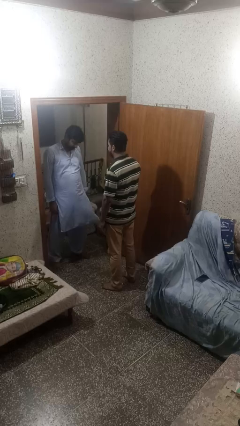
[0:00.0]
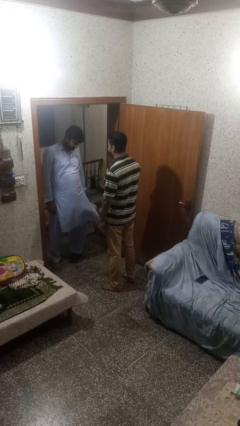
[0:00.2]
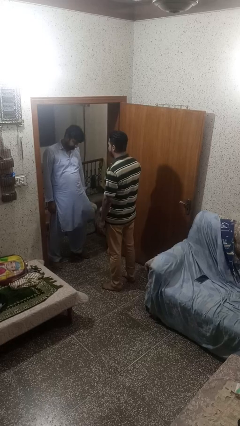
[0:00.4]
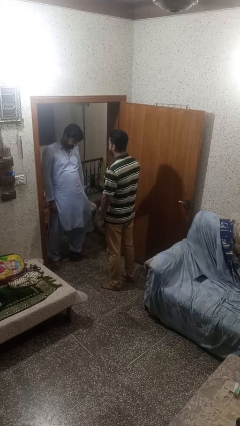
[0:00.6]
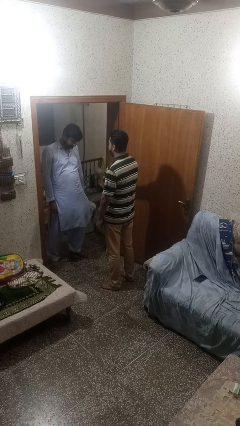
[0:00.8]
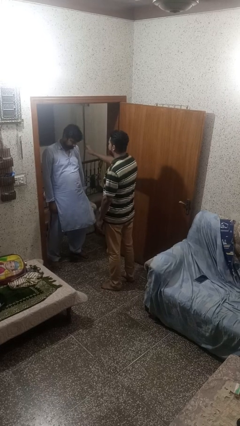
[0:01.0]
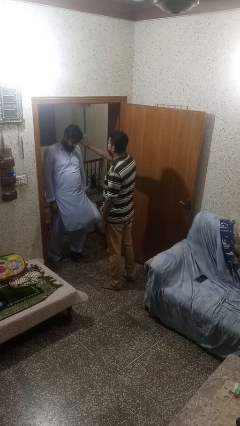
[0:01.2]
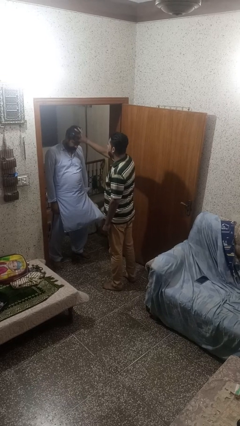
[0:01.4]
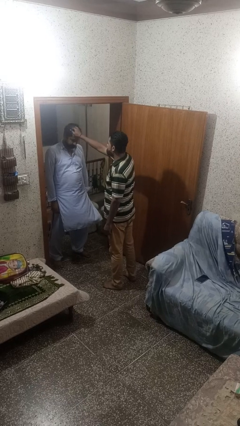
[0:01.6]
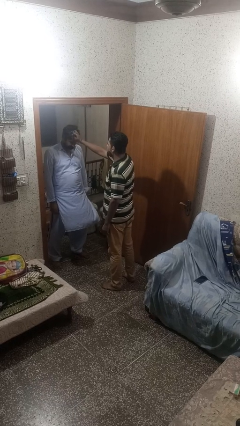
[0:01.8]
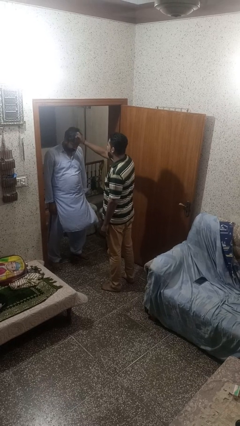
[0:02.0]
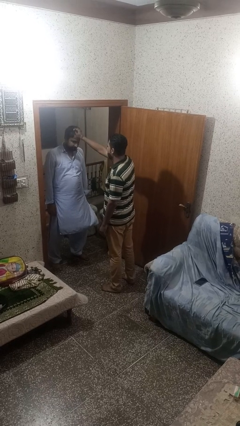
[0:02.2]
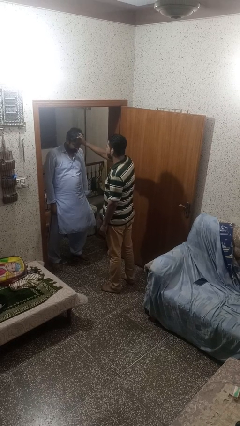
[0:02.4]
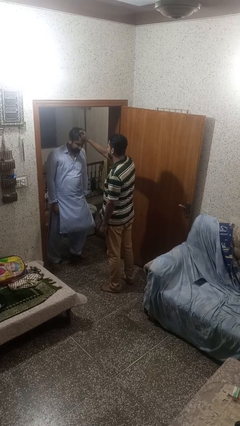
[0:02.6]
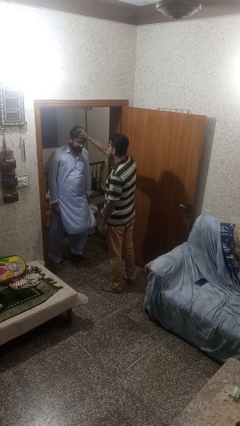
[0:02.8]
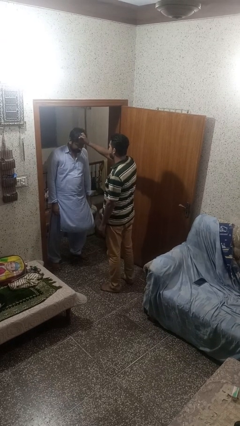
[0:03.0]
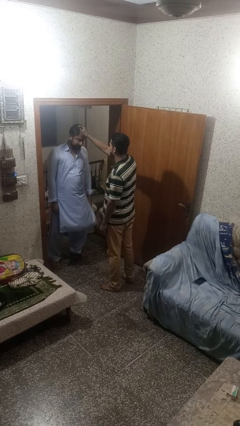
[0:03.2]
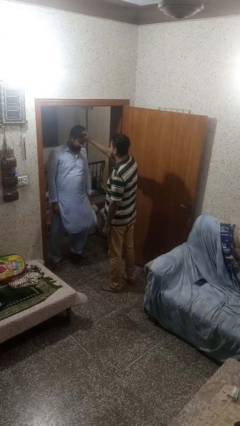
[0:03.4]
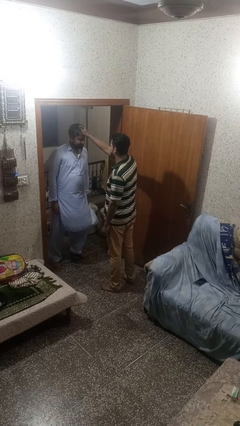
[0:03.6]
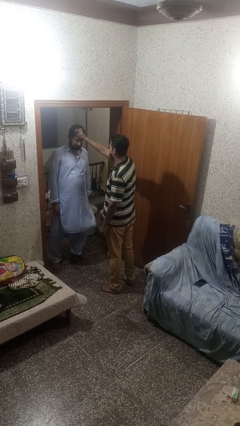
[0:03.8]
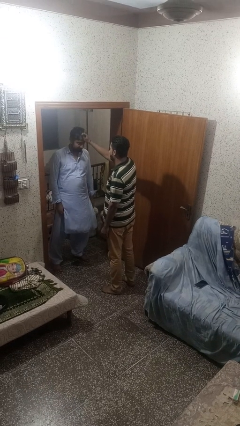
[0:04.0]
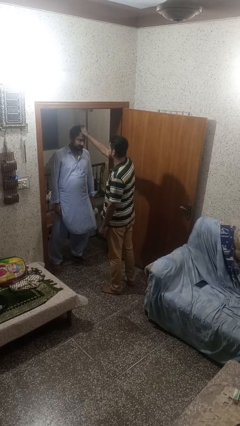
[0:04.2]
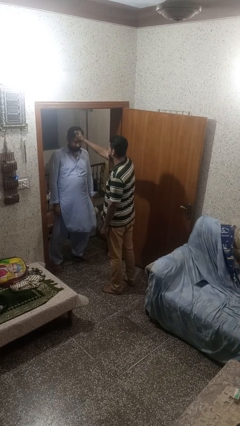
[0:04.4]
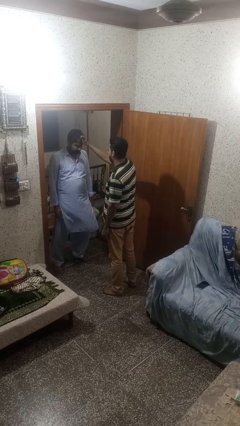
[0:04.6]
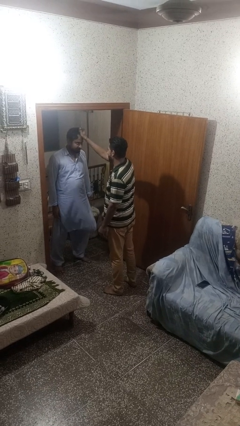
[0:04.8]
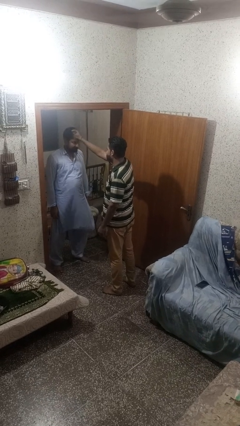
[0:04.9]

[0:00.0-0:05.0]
person grabs person by hair

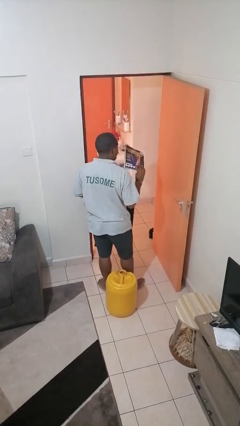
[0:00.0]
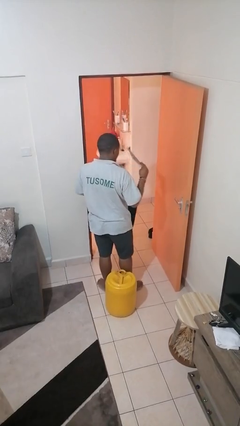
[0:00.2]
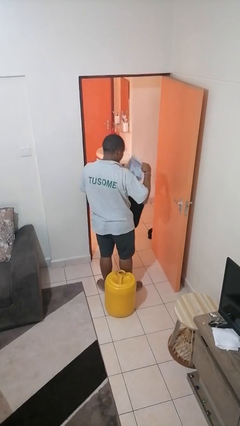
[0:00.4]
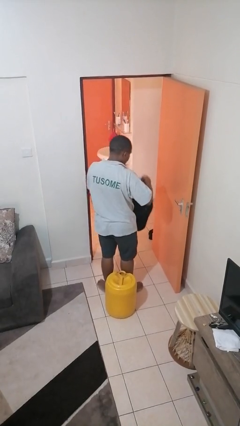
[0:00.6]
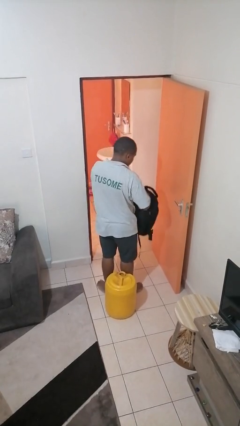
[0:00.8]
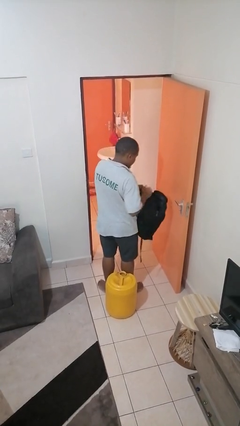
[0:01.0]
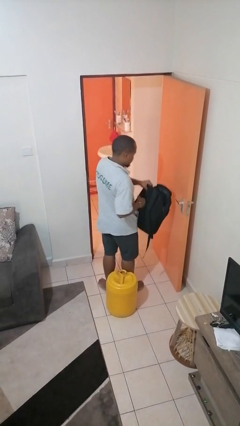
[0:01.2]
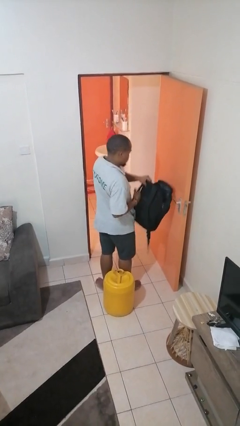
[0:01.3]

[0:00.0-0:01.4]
person puts object into backpack

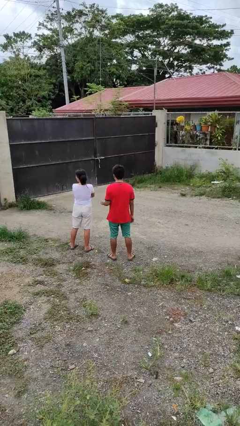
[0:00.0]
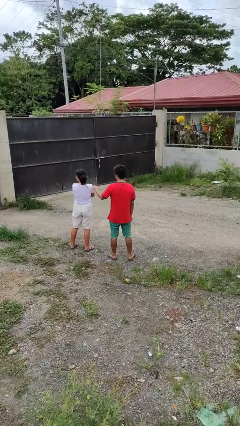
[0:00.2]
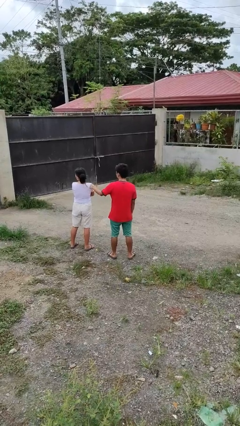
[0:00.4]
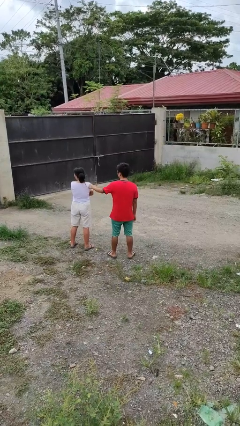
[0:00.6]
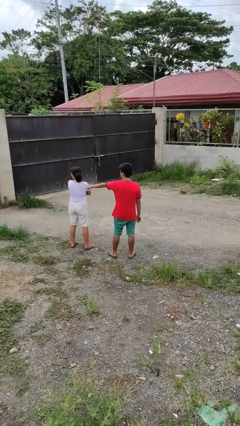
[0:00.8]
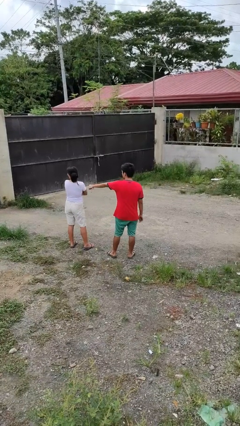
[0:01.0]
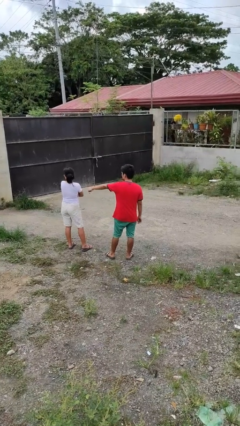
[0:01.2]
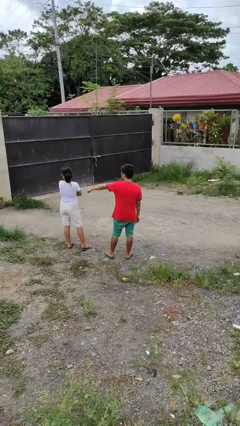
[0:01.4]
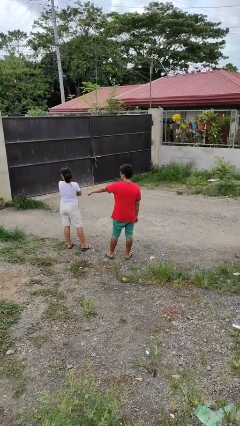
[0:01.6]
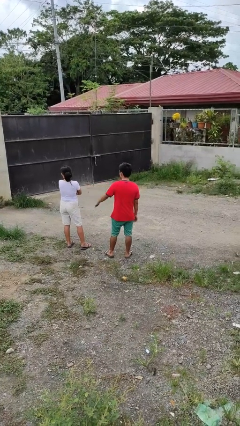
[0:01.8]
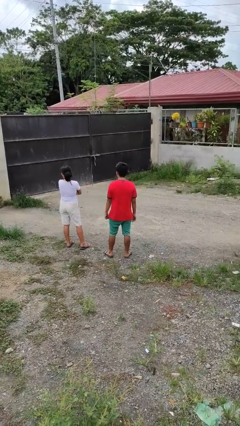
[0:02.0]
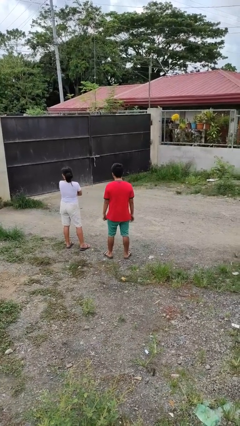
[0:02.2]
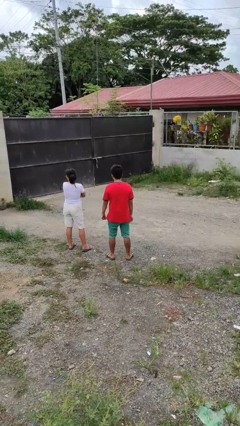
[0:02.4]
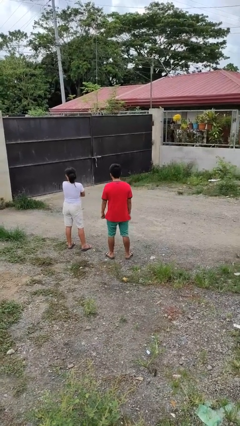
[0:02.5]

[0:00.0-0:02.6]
person pounds shoulders of person

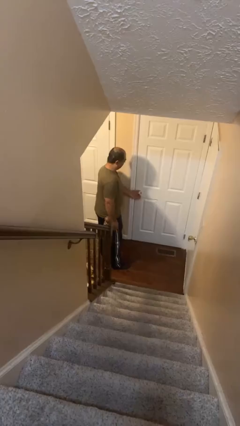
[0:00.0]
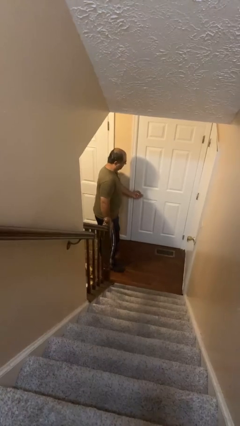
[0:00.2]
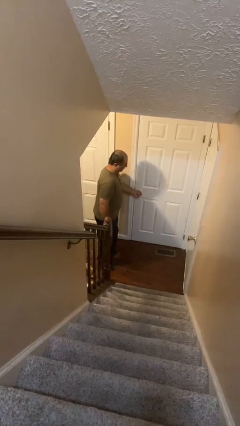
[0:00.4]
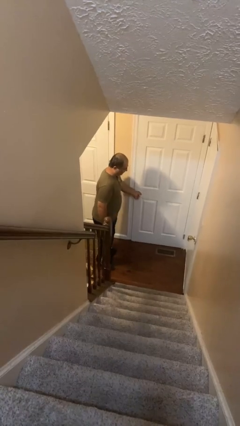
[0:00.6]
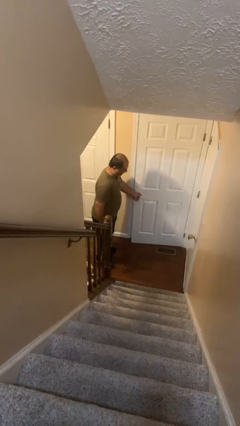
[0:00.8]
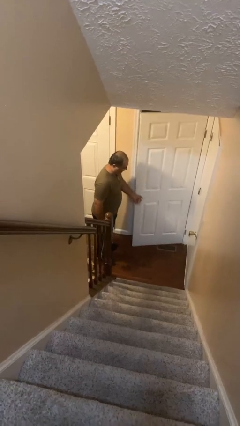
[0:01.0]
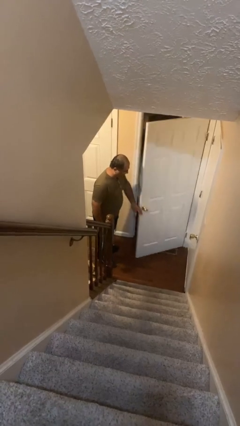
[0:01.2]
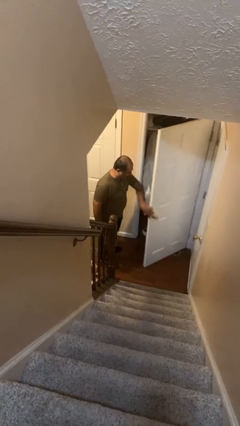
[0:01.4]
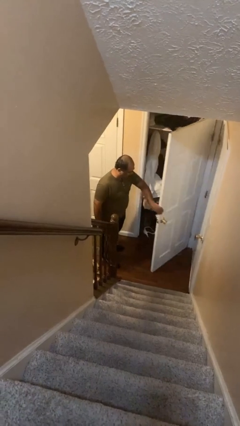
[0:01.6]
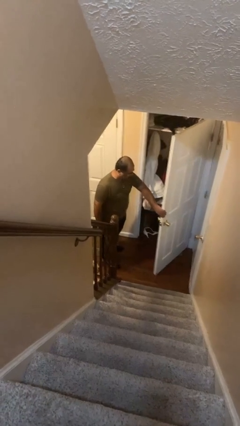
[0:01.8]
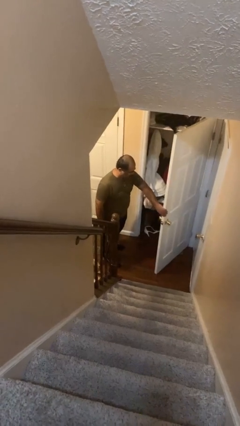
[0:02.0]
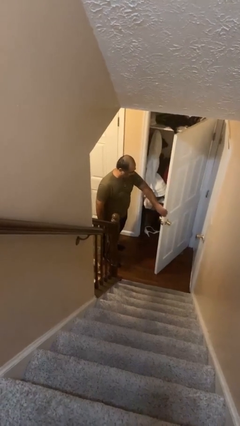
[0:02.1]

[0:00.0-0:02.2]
person opens facility door

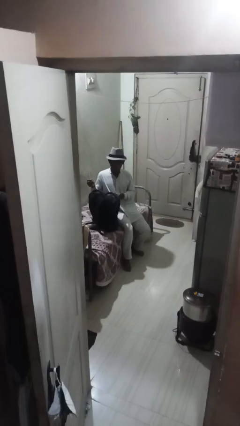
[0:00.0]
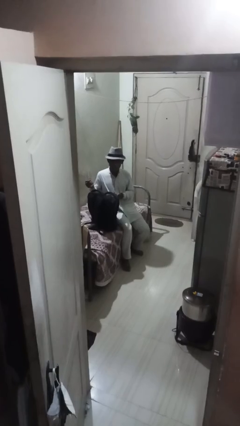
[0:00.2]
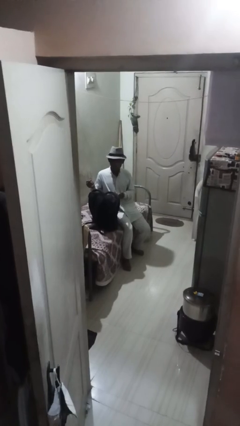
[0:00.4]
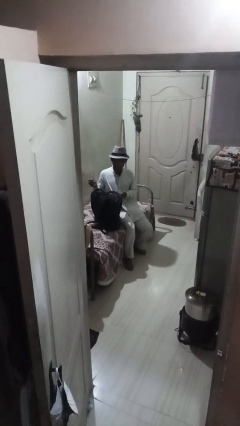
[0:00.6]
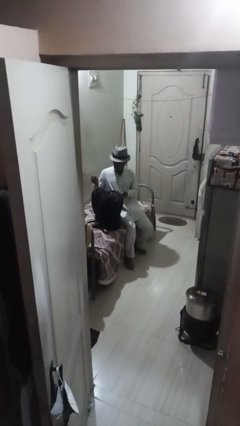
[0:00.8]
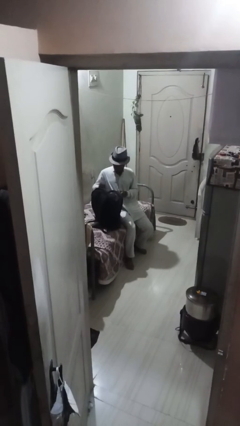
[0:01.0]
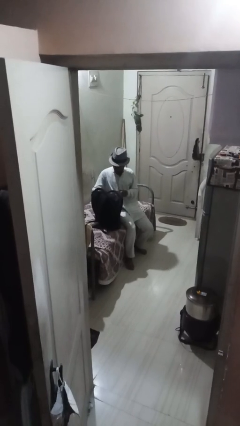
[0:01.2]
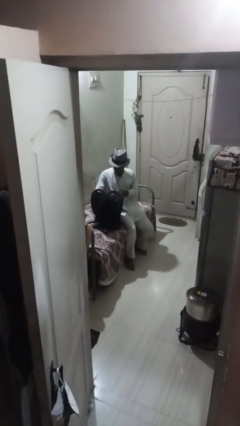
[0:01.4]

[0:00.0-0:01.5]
person searches in backpack

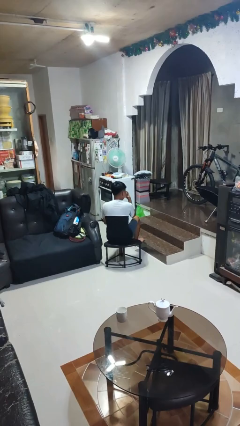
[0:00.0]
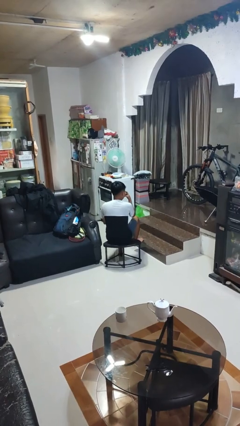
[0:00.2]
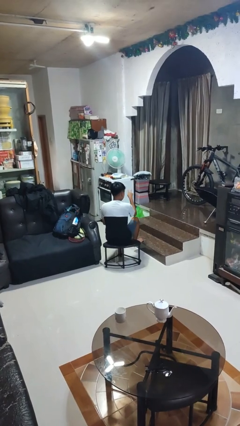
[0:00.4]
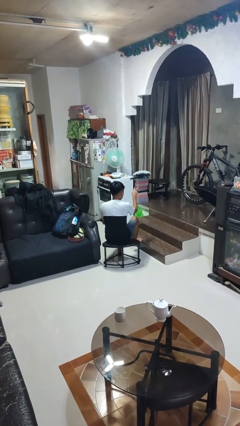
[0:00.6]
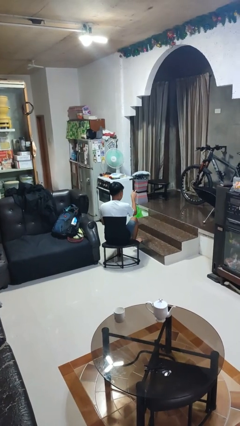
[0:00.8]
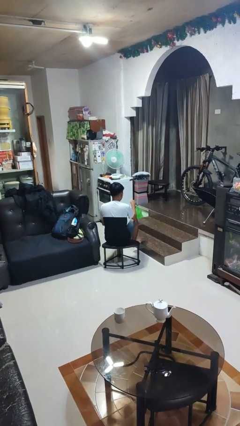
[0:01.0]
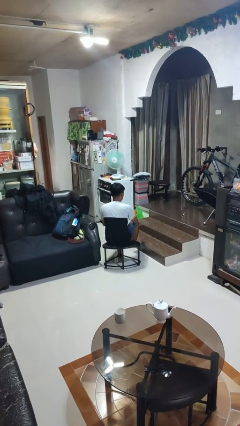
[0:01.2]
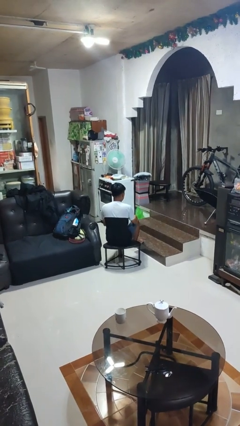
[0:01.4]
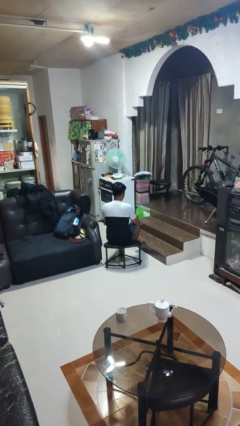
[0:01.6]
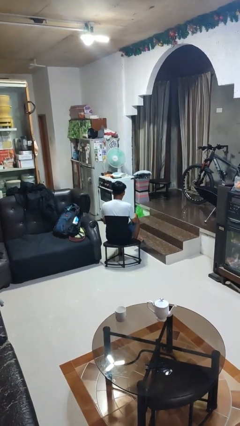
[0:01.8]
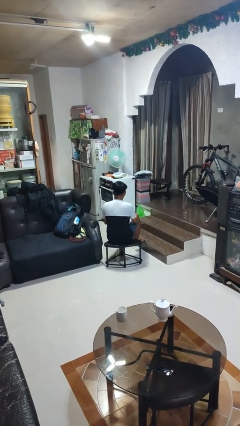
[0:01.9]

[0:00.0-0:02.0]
person gestures watch closely

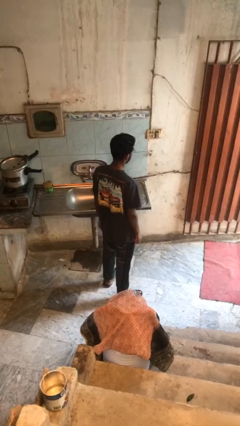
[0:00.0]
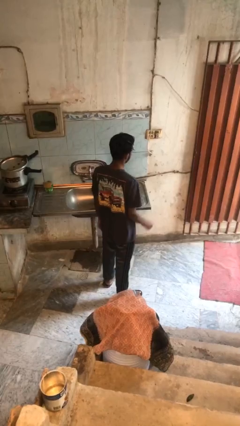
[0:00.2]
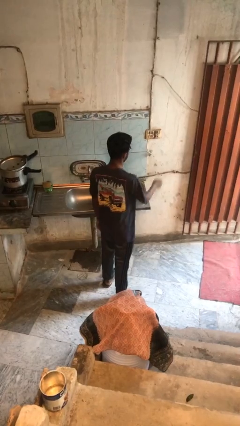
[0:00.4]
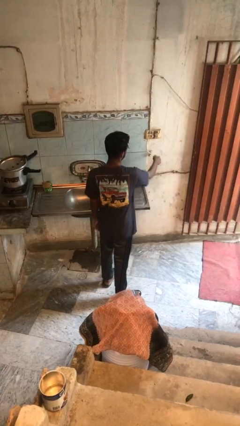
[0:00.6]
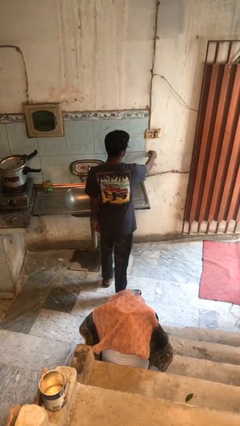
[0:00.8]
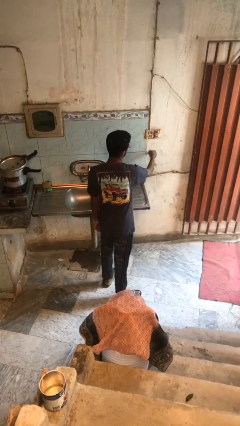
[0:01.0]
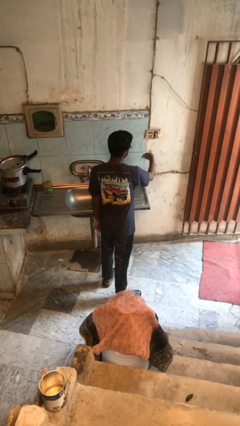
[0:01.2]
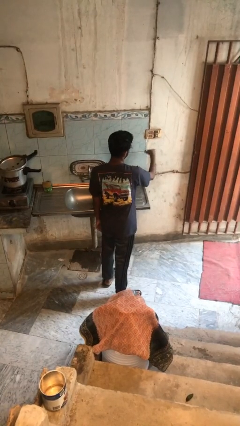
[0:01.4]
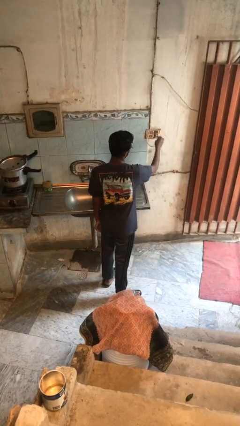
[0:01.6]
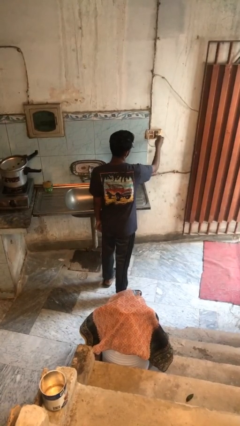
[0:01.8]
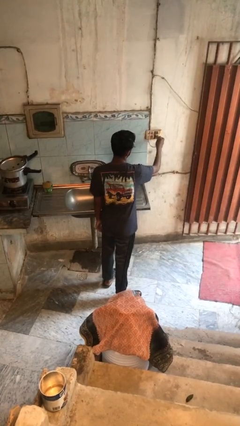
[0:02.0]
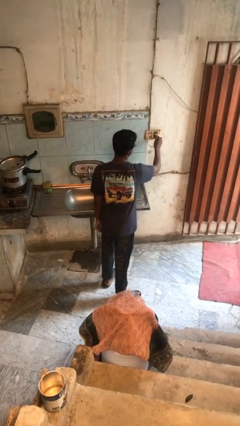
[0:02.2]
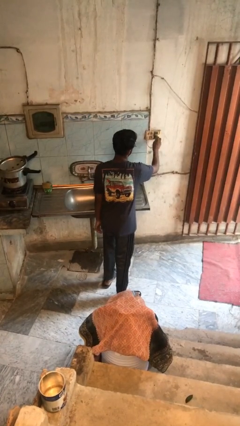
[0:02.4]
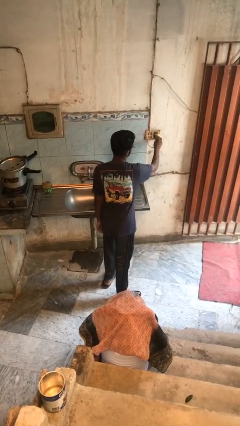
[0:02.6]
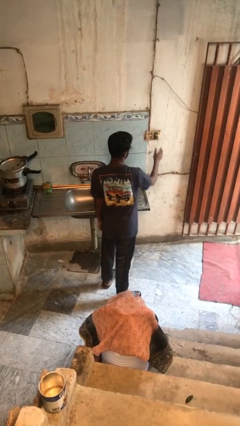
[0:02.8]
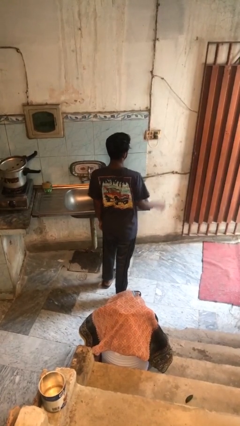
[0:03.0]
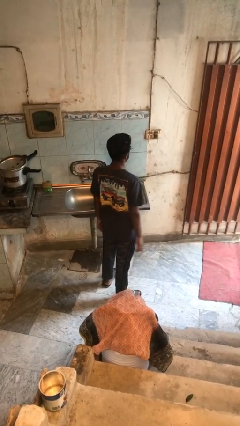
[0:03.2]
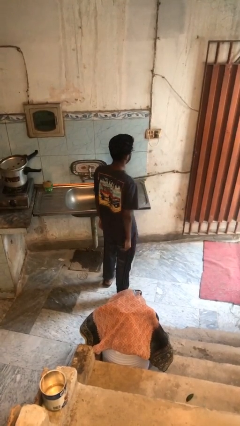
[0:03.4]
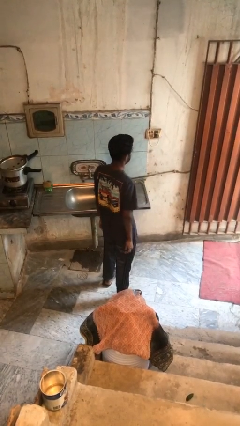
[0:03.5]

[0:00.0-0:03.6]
person plugs into electrical socket
